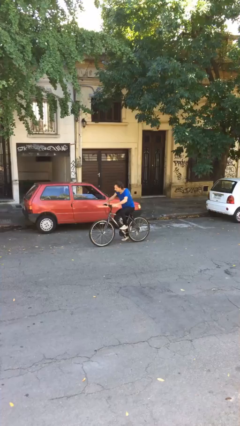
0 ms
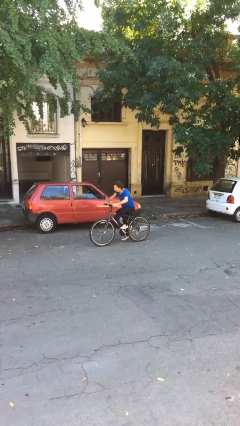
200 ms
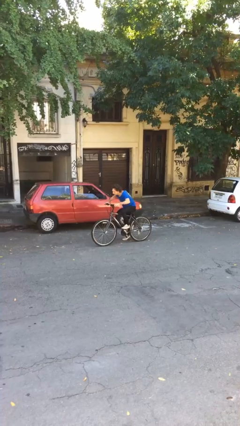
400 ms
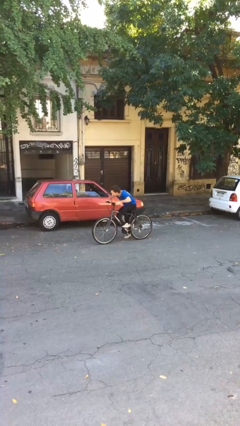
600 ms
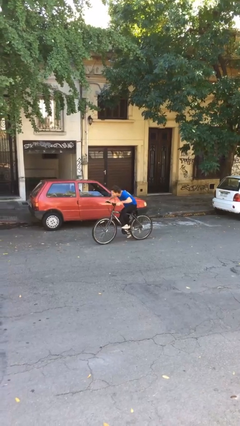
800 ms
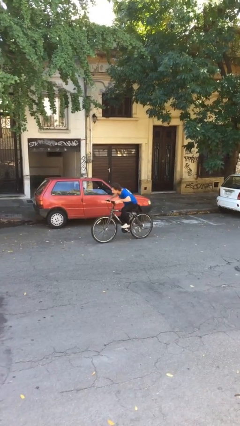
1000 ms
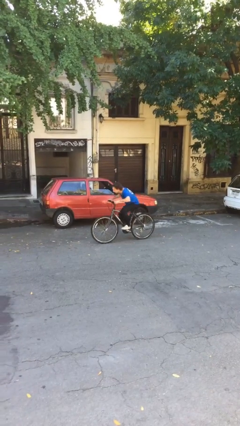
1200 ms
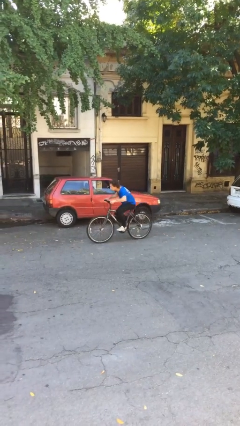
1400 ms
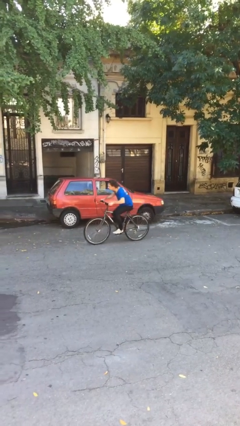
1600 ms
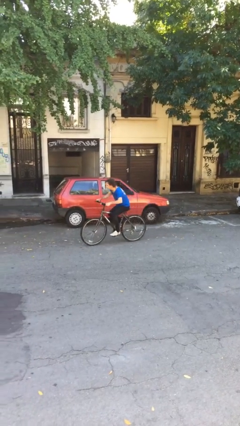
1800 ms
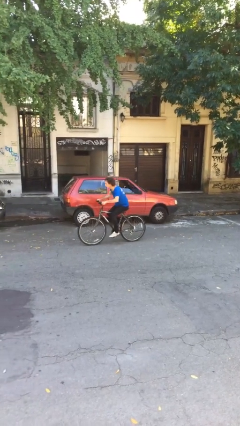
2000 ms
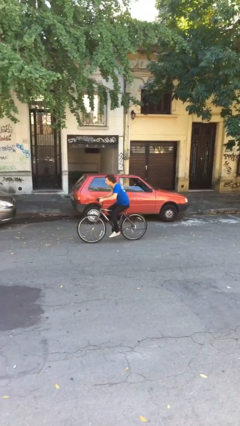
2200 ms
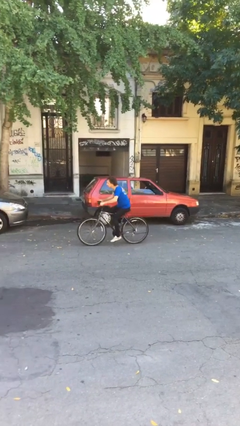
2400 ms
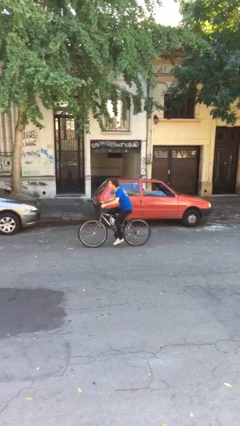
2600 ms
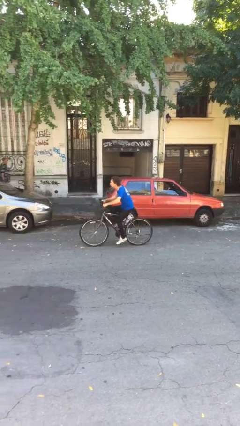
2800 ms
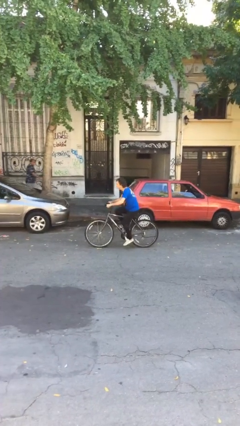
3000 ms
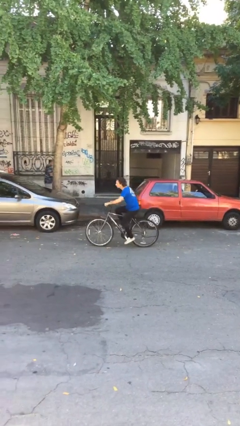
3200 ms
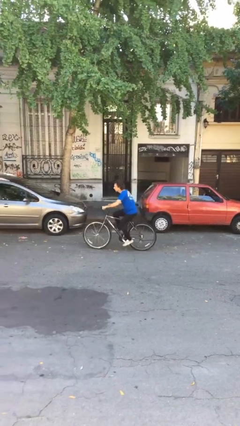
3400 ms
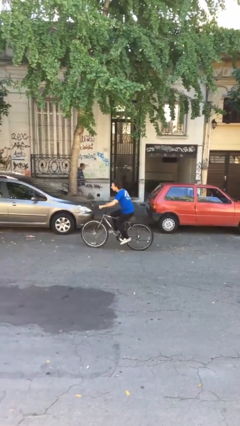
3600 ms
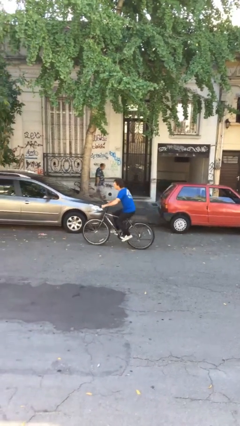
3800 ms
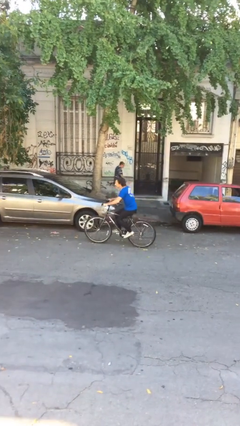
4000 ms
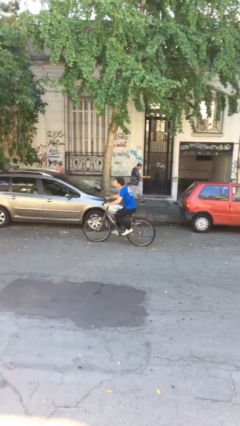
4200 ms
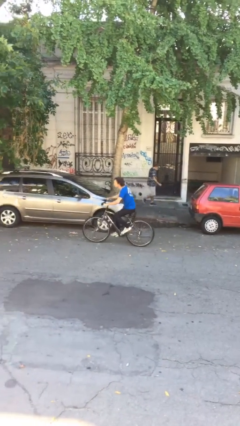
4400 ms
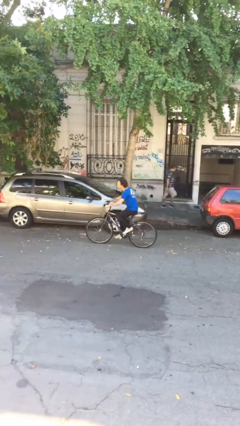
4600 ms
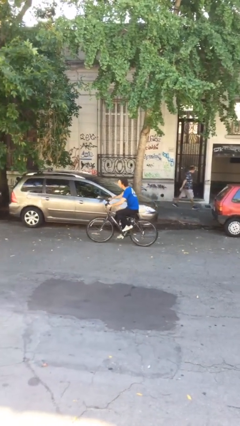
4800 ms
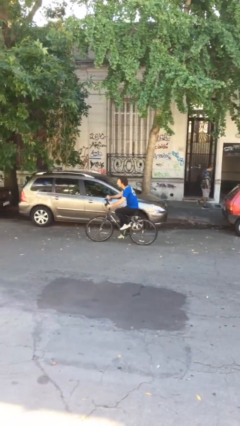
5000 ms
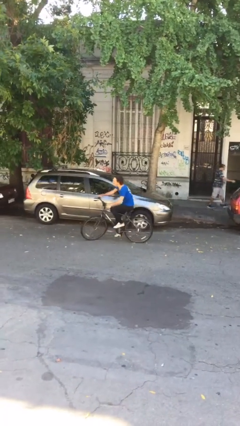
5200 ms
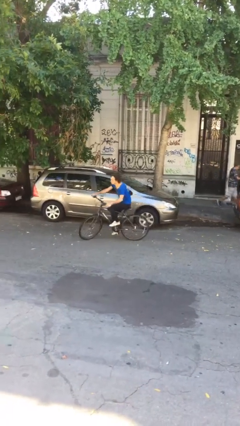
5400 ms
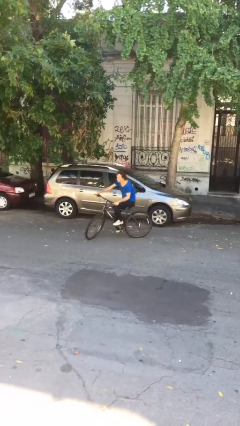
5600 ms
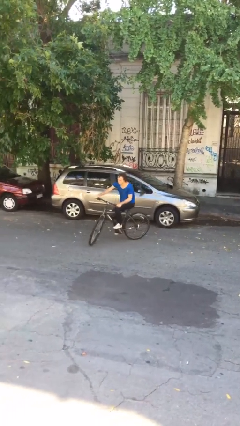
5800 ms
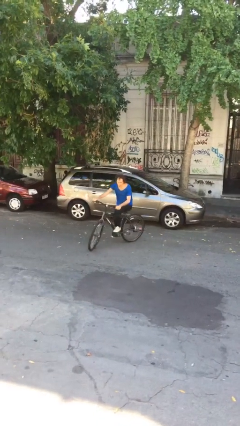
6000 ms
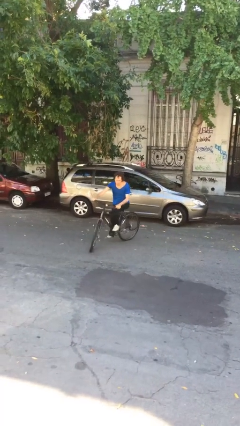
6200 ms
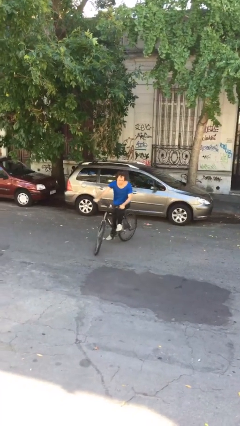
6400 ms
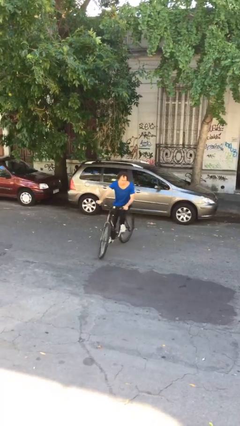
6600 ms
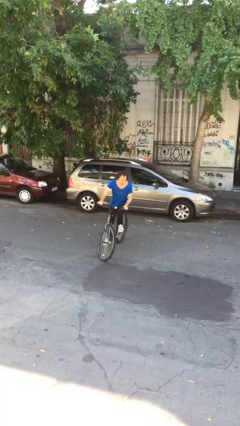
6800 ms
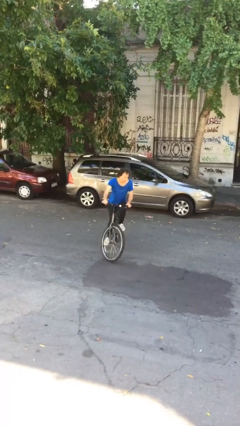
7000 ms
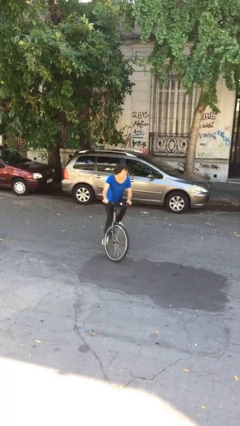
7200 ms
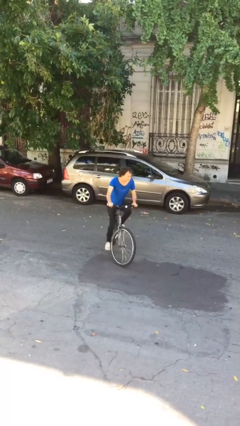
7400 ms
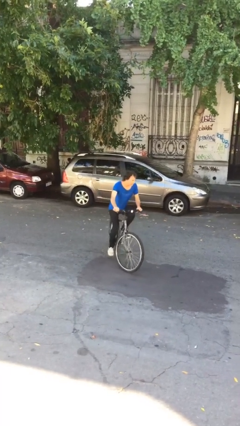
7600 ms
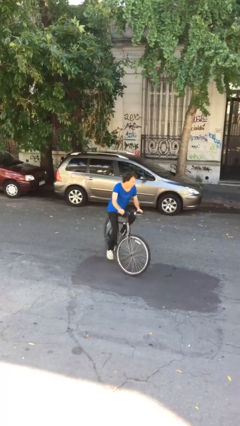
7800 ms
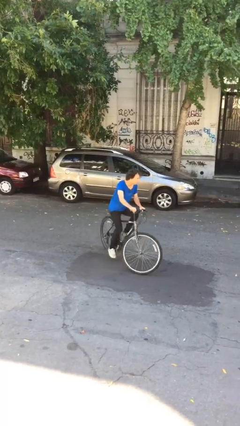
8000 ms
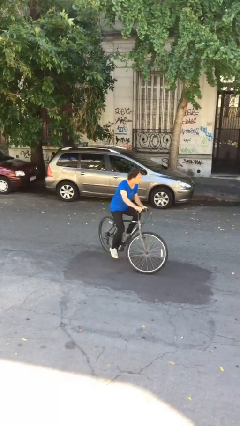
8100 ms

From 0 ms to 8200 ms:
person rides bicycle

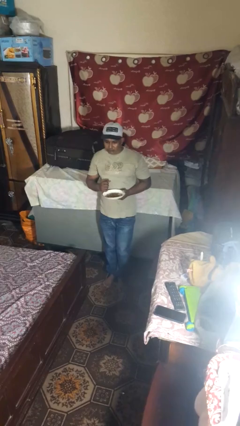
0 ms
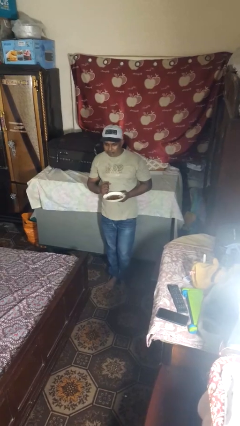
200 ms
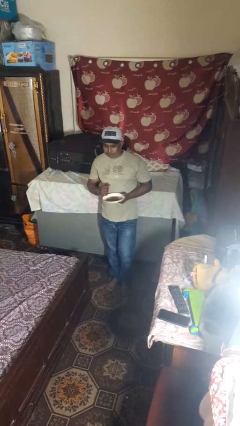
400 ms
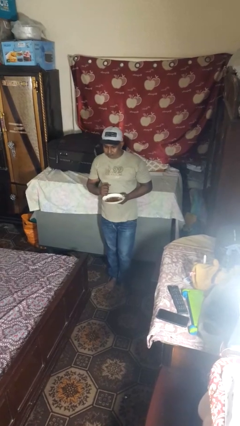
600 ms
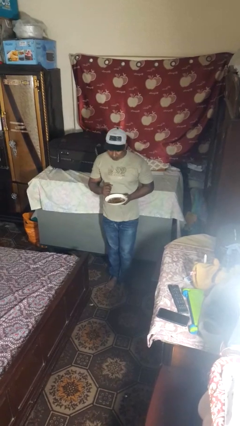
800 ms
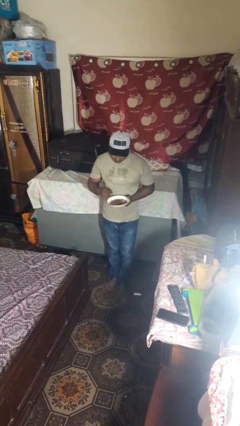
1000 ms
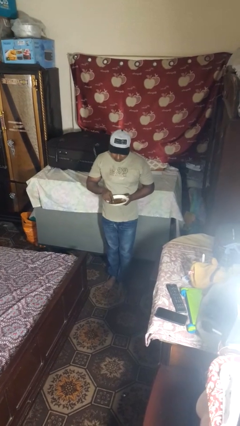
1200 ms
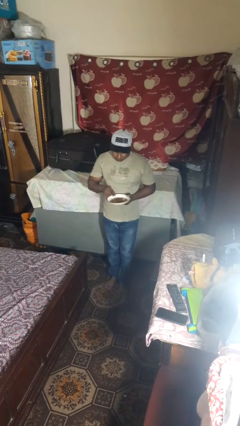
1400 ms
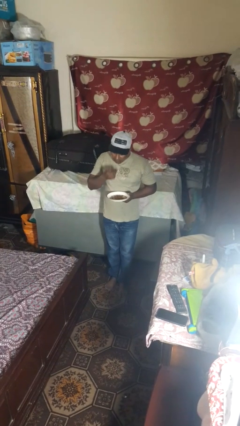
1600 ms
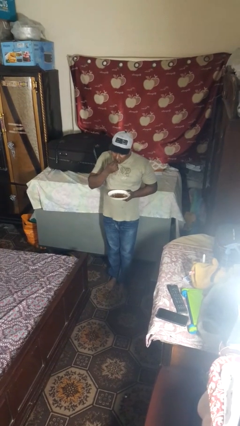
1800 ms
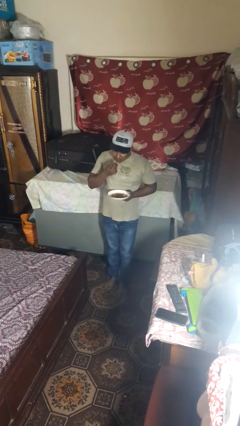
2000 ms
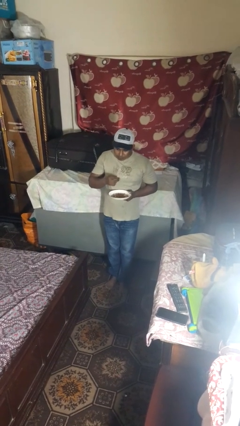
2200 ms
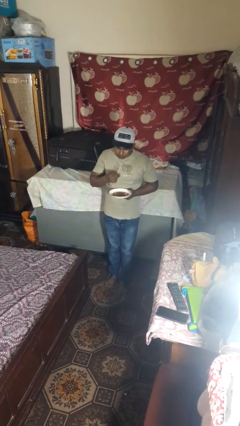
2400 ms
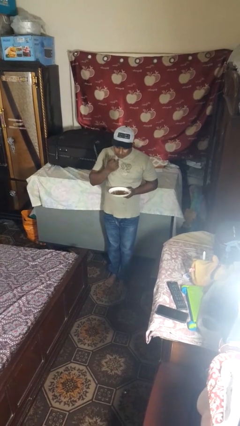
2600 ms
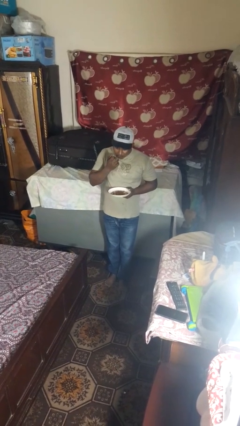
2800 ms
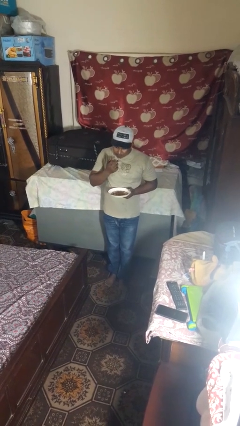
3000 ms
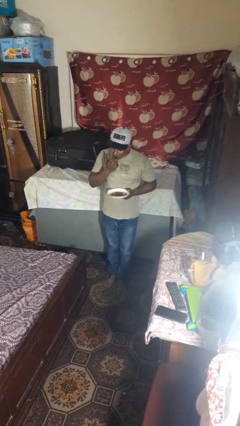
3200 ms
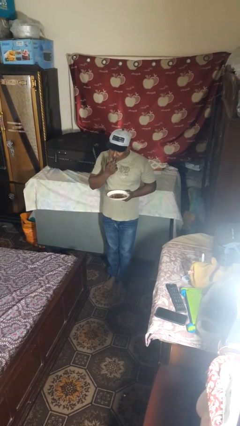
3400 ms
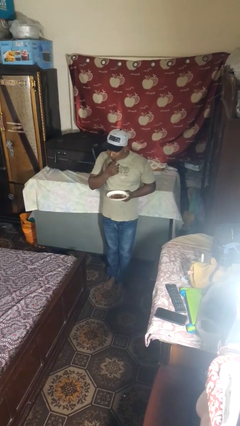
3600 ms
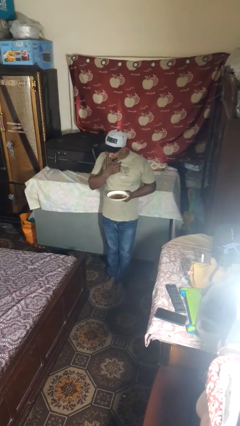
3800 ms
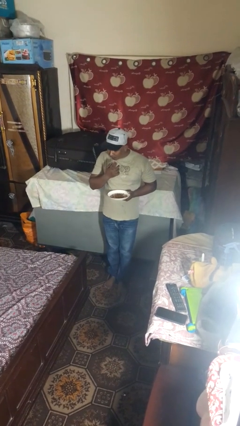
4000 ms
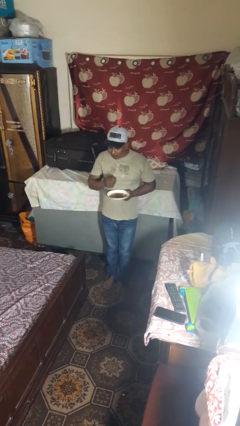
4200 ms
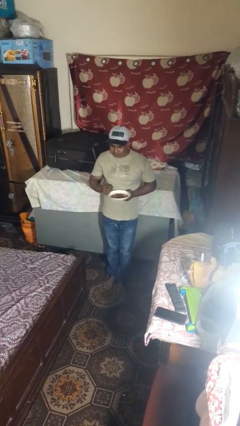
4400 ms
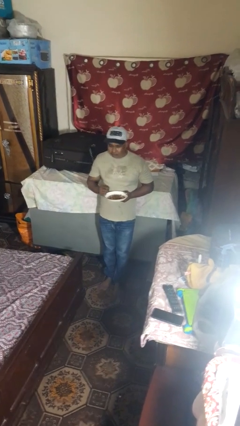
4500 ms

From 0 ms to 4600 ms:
person licks fingers

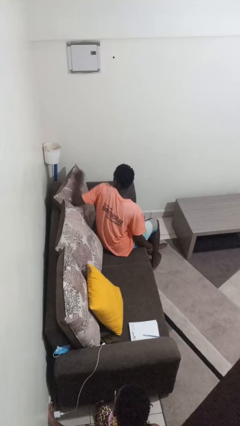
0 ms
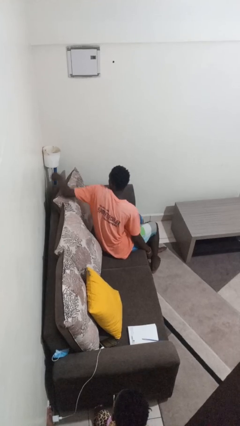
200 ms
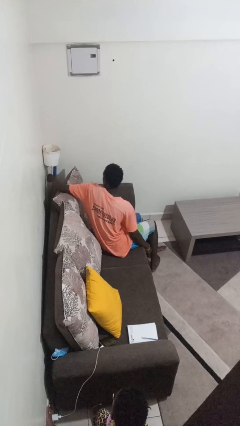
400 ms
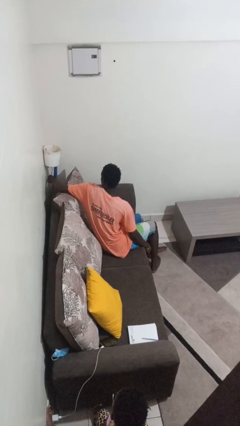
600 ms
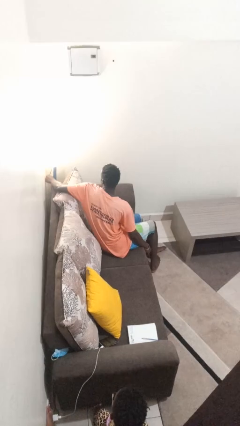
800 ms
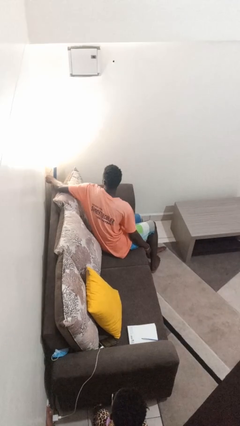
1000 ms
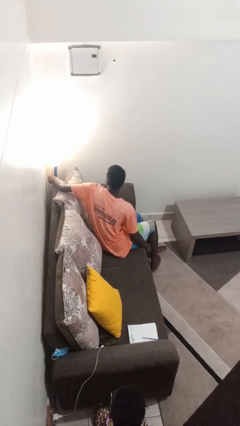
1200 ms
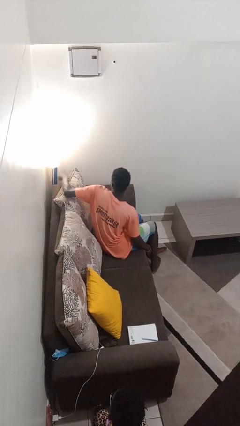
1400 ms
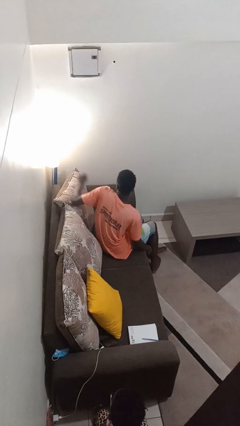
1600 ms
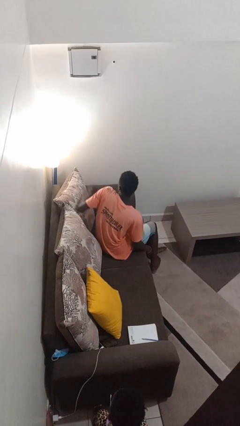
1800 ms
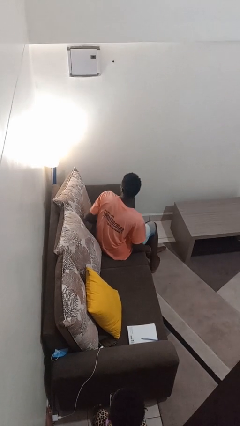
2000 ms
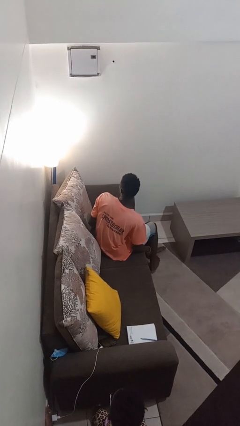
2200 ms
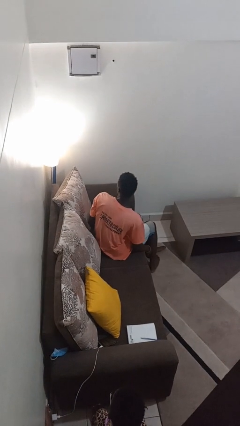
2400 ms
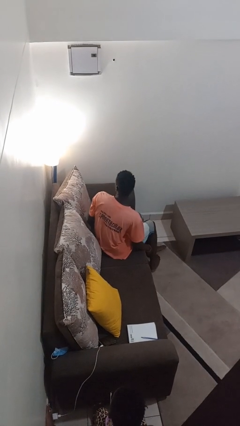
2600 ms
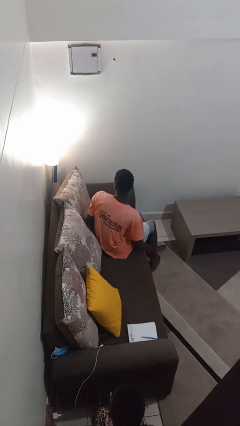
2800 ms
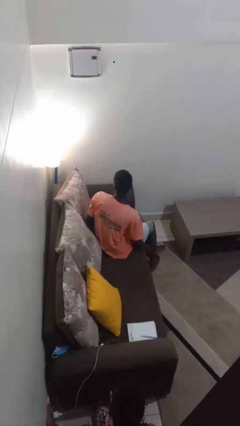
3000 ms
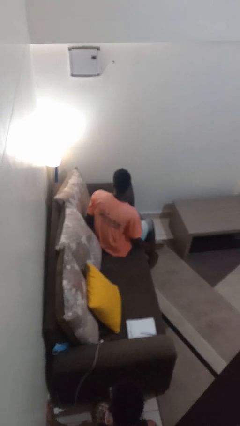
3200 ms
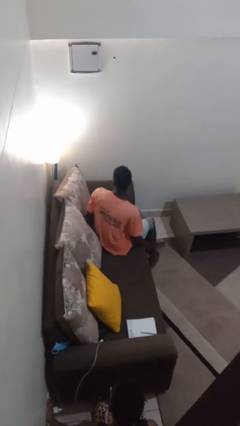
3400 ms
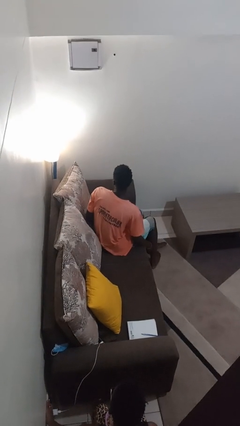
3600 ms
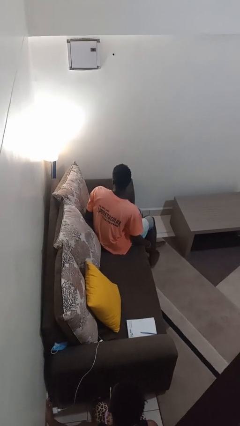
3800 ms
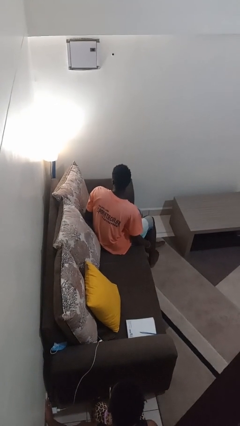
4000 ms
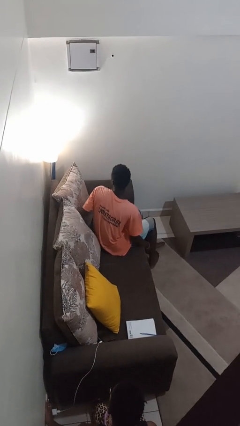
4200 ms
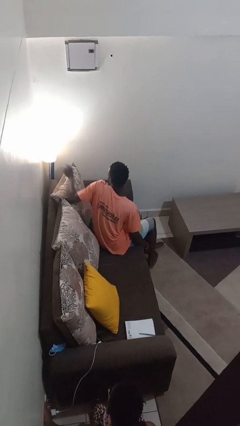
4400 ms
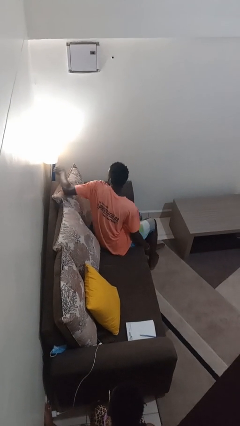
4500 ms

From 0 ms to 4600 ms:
person turns on lamp

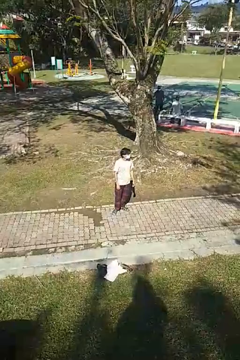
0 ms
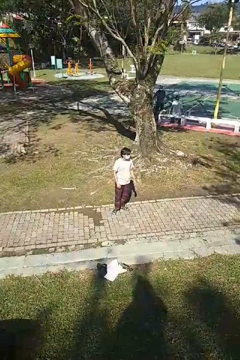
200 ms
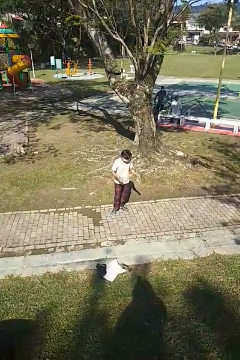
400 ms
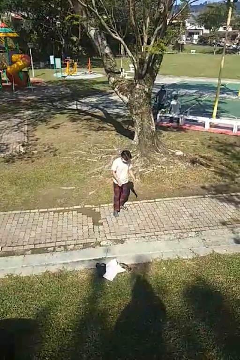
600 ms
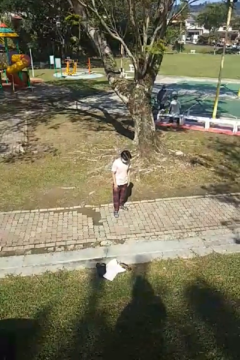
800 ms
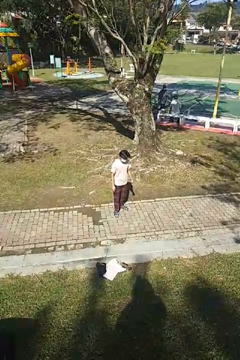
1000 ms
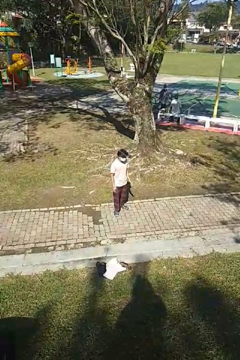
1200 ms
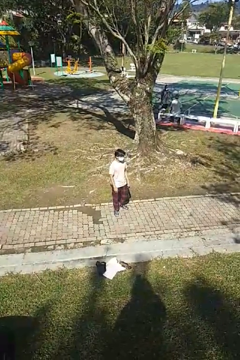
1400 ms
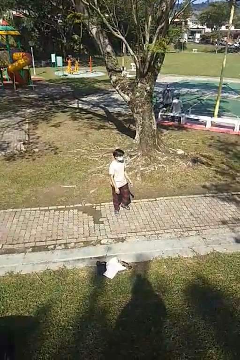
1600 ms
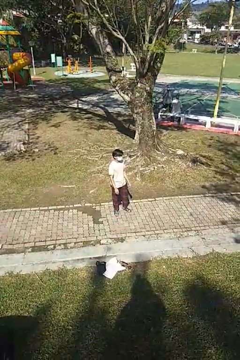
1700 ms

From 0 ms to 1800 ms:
person slaps hands on thighs
